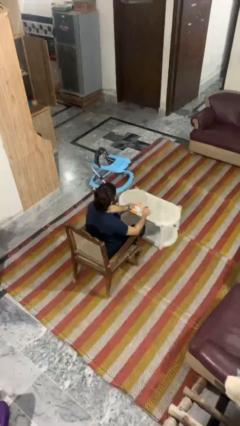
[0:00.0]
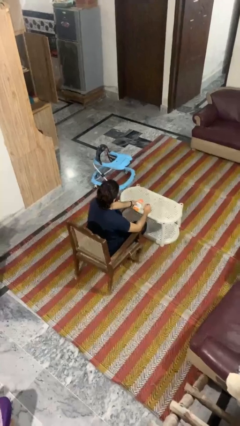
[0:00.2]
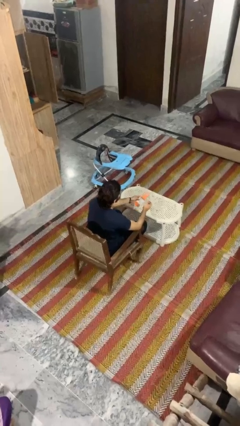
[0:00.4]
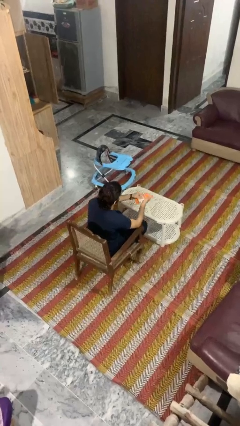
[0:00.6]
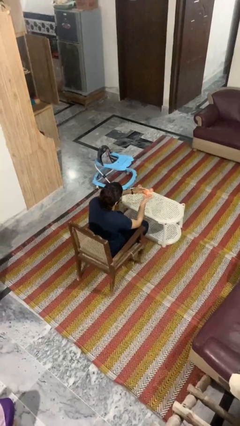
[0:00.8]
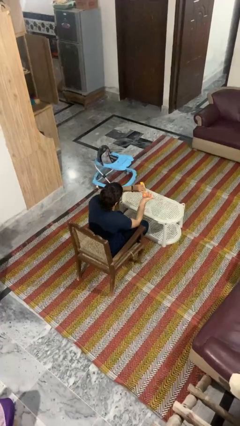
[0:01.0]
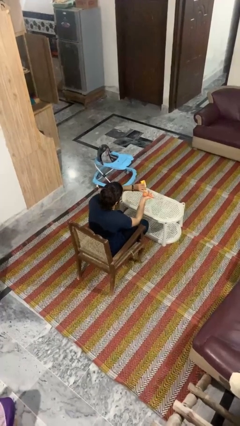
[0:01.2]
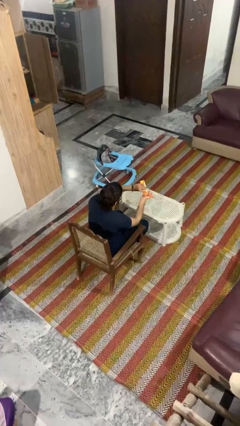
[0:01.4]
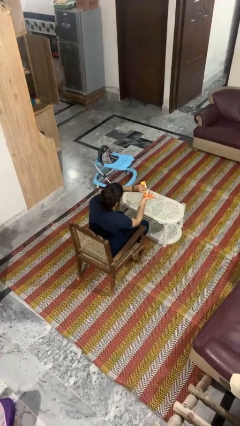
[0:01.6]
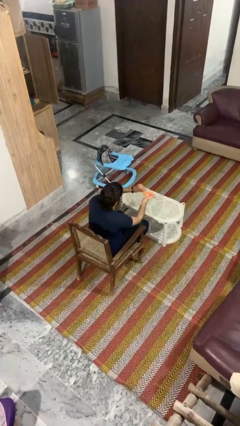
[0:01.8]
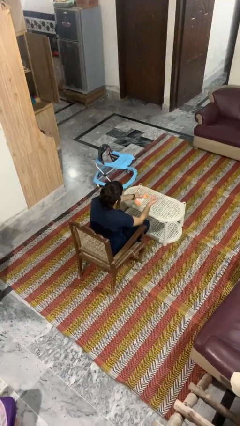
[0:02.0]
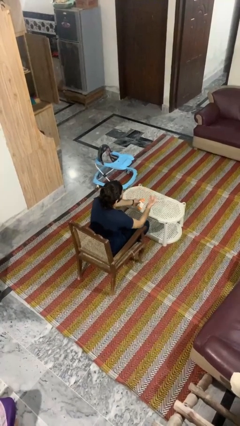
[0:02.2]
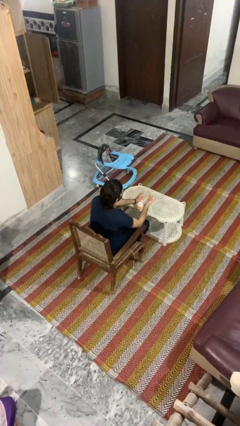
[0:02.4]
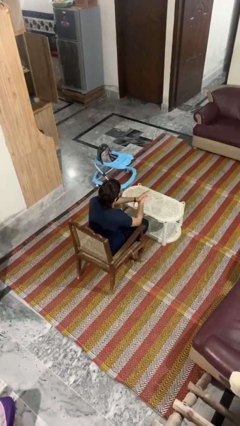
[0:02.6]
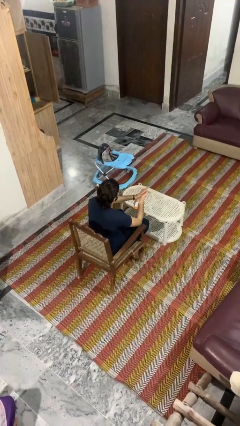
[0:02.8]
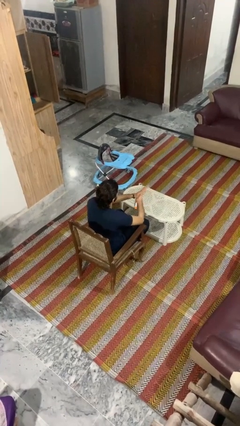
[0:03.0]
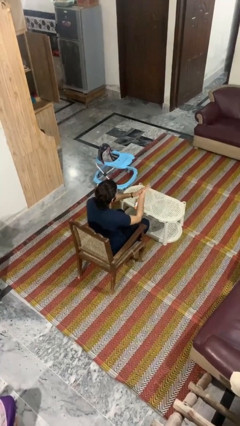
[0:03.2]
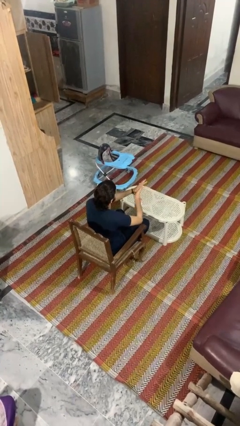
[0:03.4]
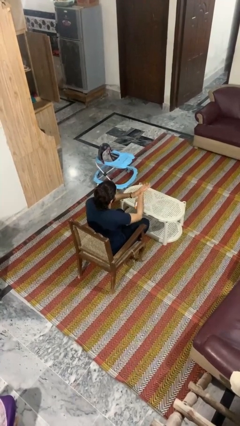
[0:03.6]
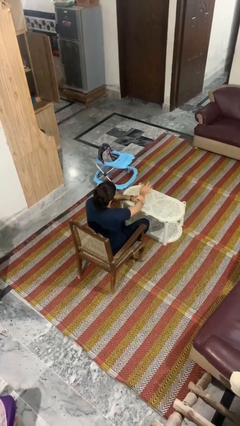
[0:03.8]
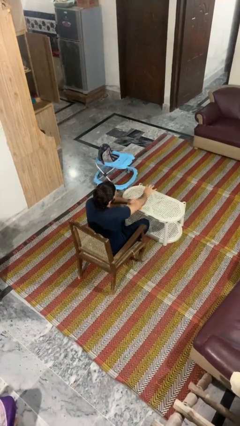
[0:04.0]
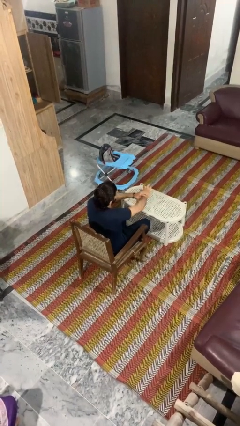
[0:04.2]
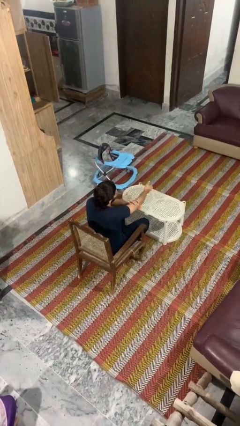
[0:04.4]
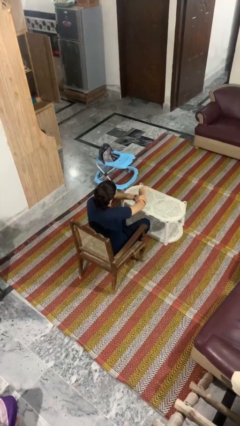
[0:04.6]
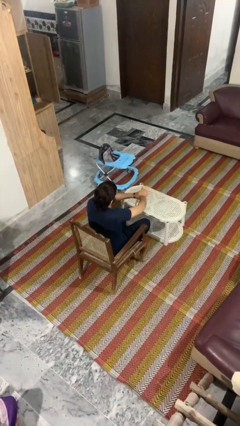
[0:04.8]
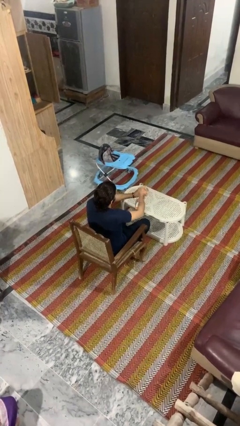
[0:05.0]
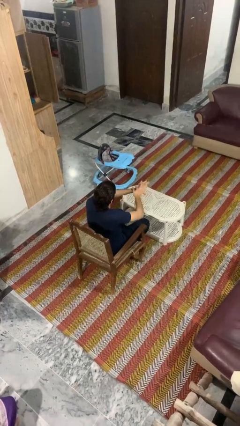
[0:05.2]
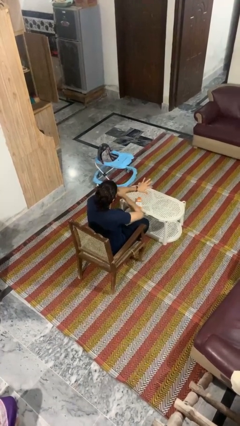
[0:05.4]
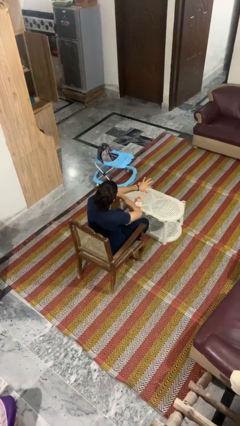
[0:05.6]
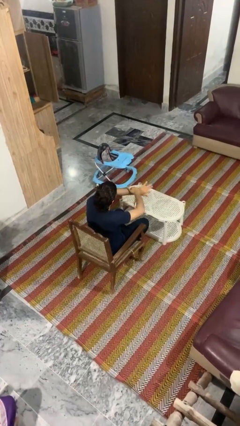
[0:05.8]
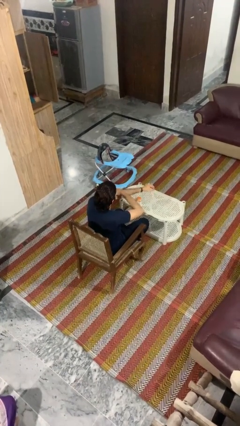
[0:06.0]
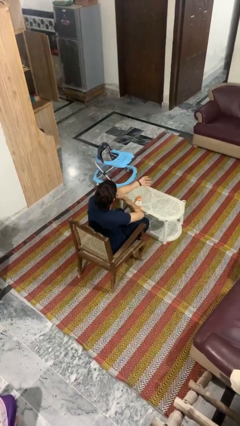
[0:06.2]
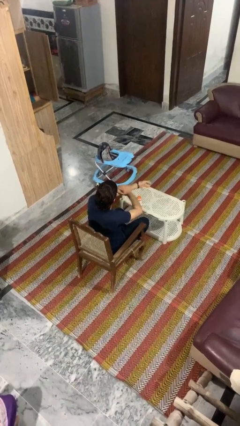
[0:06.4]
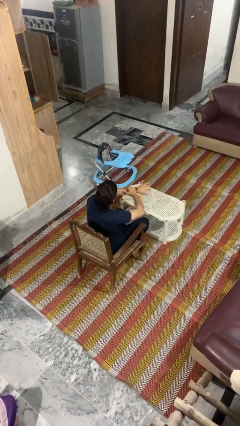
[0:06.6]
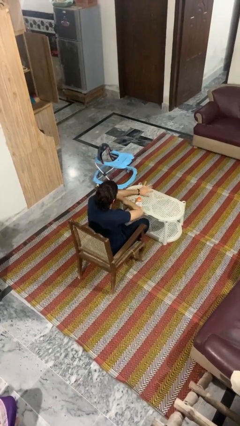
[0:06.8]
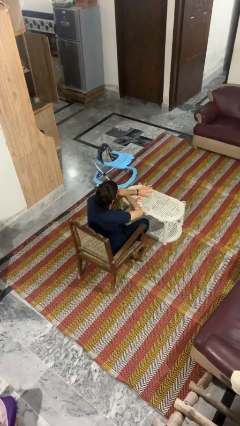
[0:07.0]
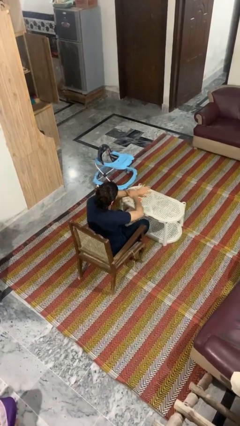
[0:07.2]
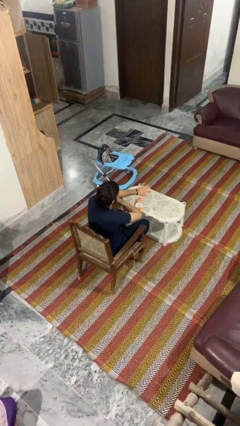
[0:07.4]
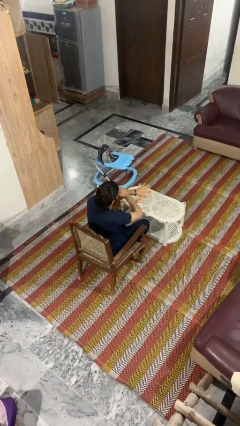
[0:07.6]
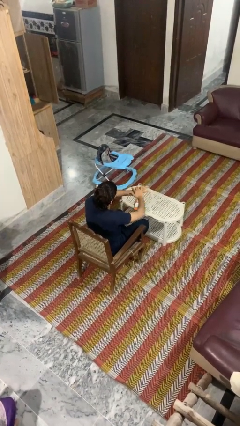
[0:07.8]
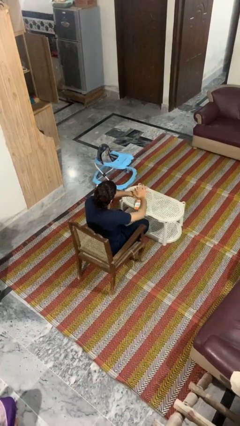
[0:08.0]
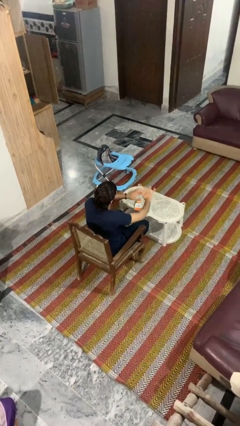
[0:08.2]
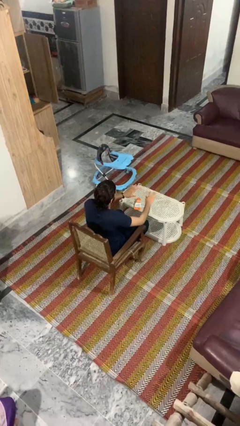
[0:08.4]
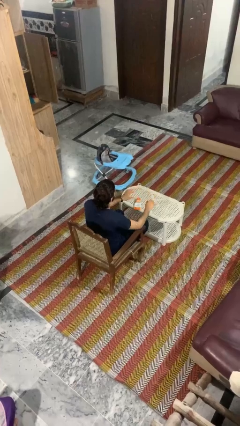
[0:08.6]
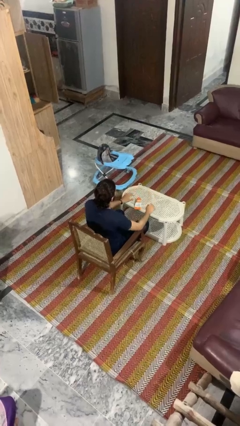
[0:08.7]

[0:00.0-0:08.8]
person applies sunscreen

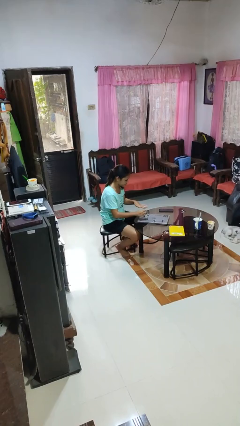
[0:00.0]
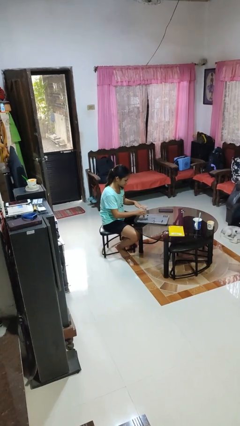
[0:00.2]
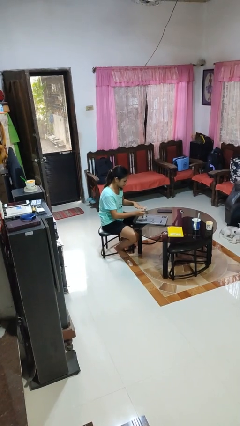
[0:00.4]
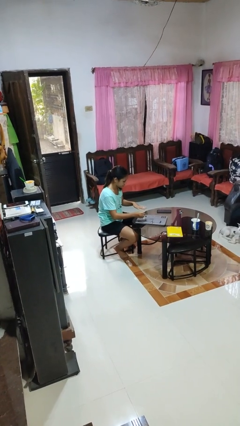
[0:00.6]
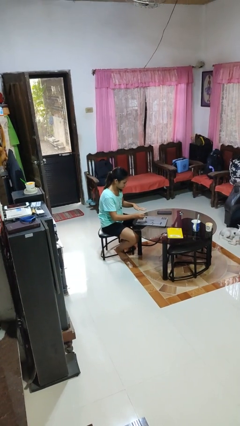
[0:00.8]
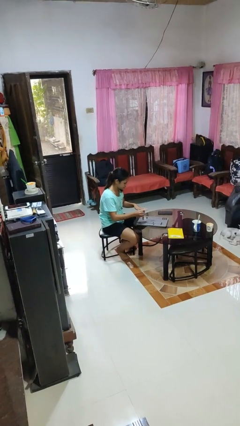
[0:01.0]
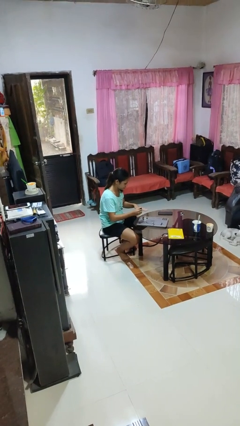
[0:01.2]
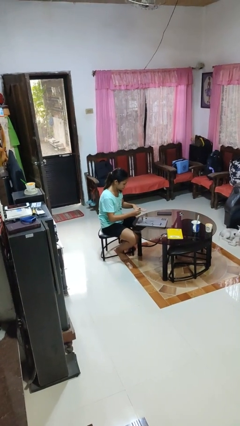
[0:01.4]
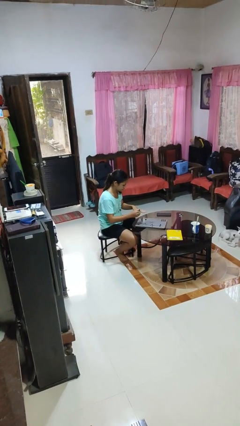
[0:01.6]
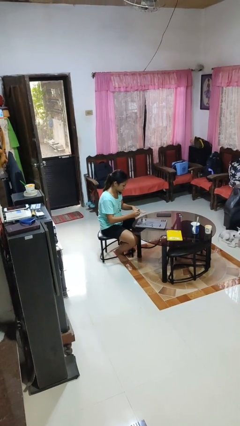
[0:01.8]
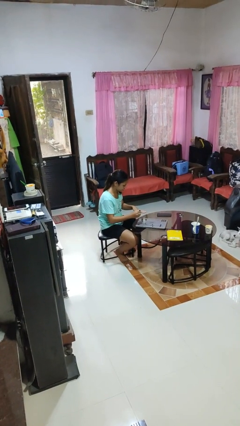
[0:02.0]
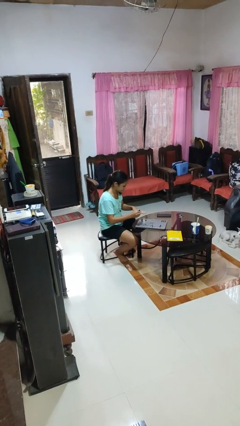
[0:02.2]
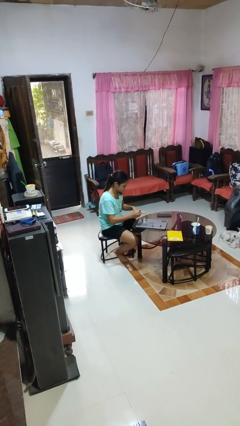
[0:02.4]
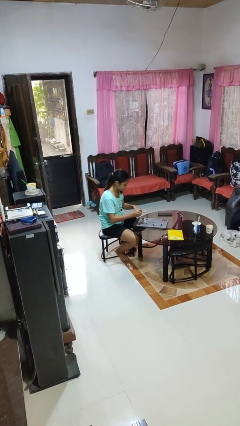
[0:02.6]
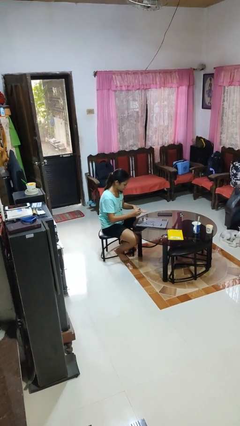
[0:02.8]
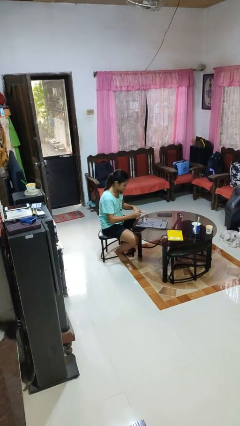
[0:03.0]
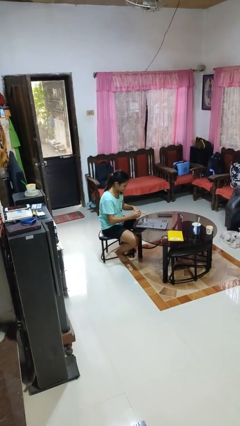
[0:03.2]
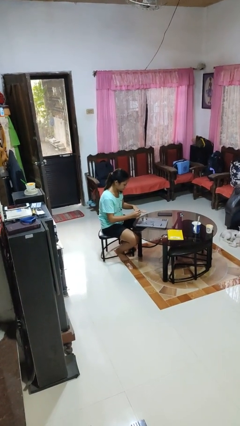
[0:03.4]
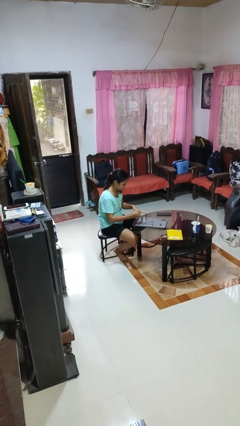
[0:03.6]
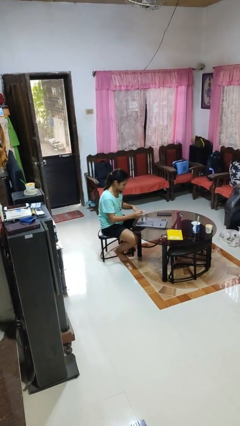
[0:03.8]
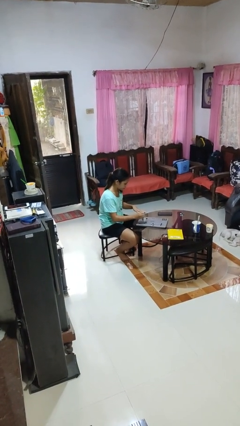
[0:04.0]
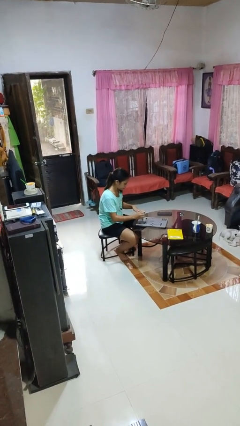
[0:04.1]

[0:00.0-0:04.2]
person paints fingernails

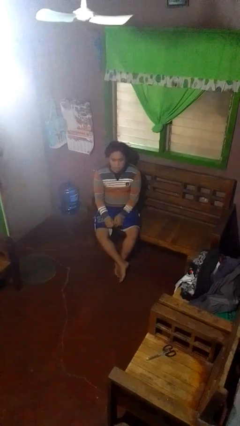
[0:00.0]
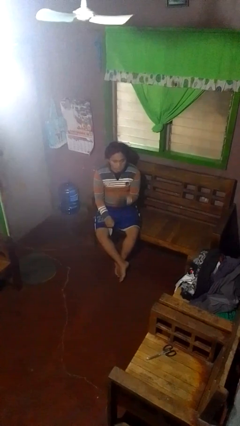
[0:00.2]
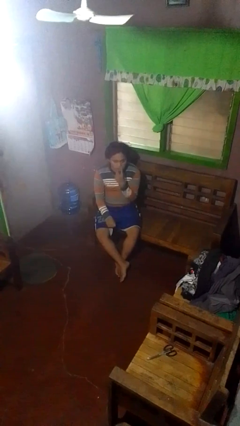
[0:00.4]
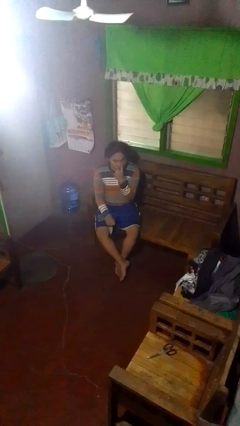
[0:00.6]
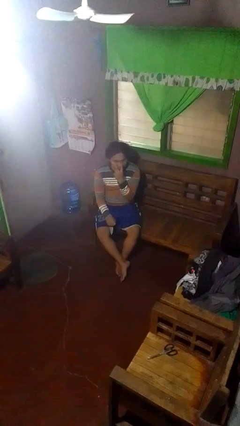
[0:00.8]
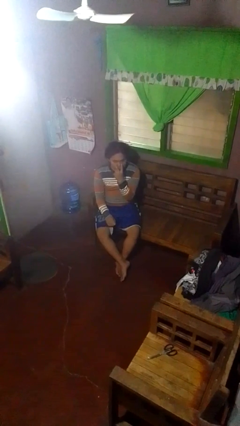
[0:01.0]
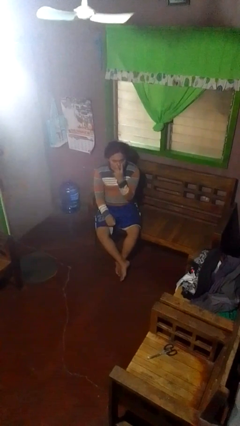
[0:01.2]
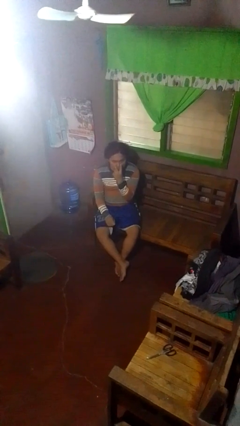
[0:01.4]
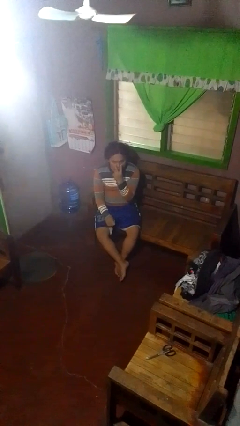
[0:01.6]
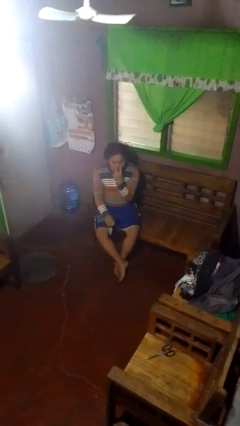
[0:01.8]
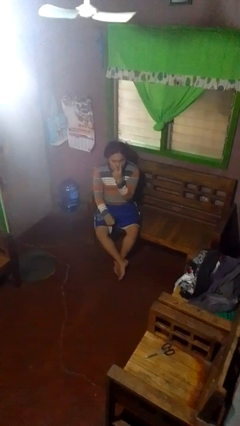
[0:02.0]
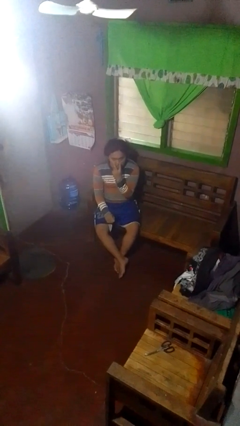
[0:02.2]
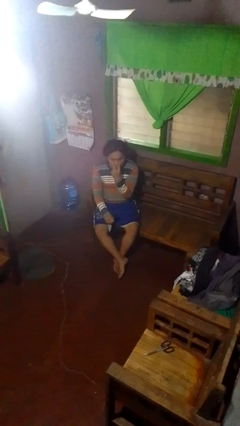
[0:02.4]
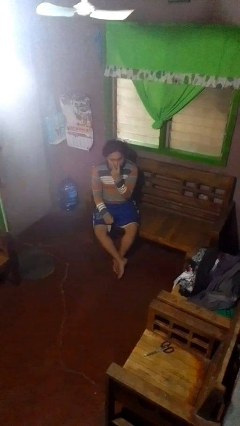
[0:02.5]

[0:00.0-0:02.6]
person gestures watch closely

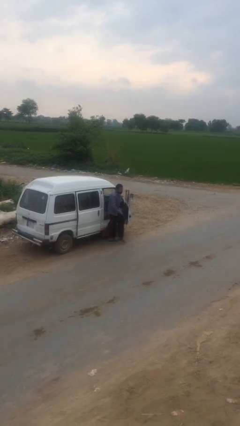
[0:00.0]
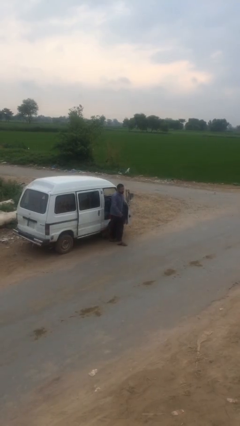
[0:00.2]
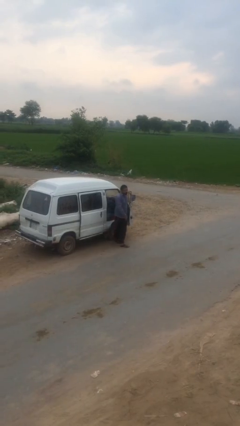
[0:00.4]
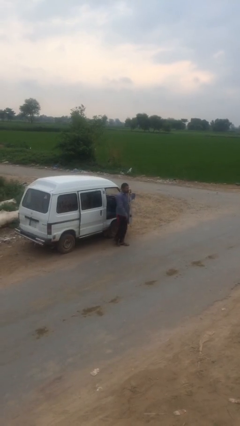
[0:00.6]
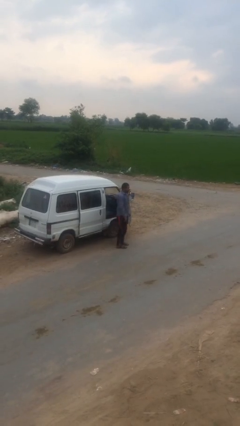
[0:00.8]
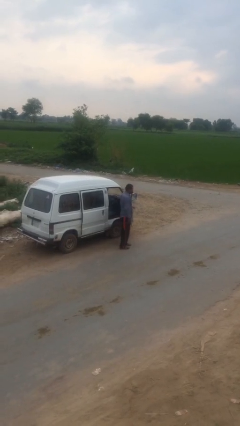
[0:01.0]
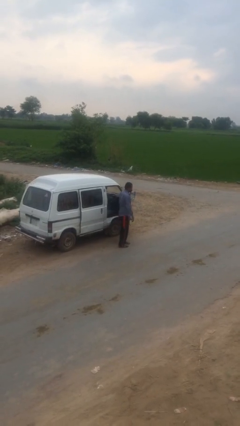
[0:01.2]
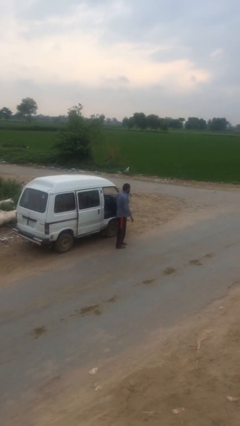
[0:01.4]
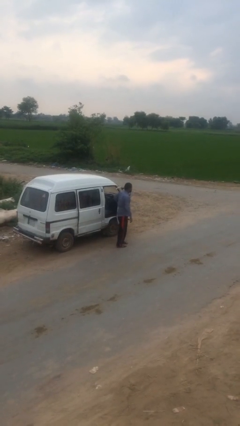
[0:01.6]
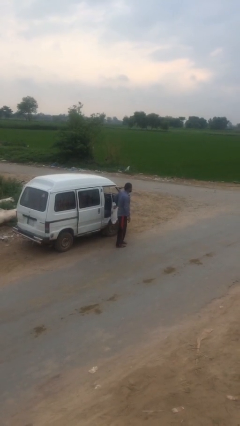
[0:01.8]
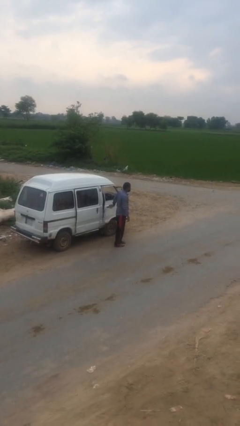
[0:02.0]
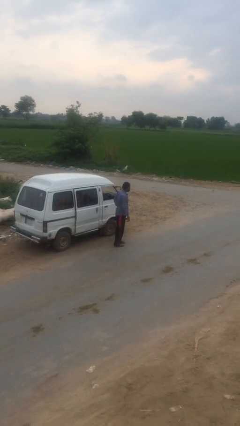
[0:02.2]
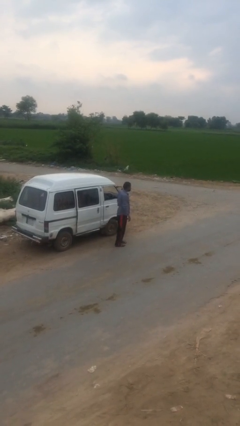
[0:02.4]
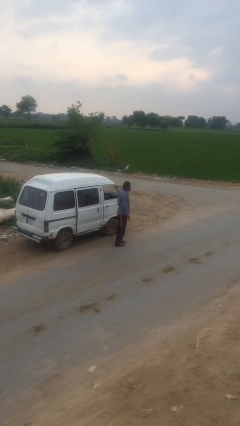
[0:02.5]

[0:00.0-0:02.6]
person closes car door
